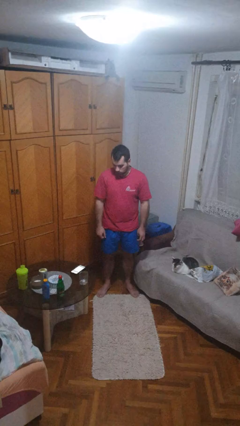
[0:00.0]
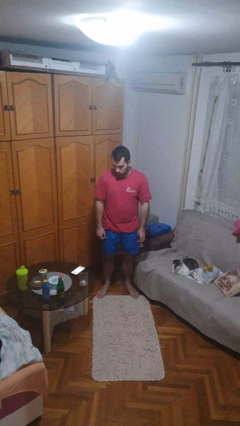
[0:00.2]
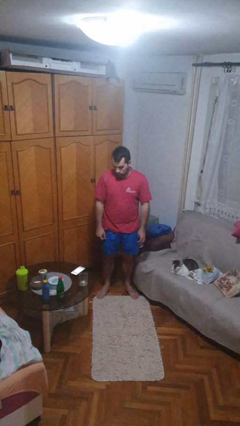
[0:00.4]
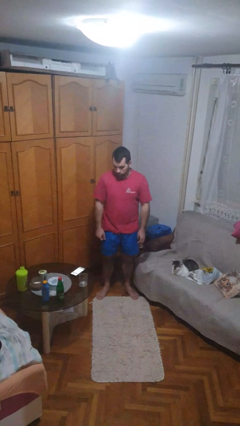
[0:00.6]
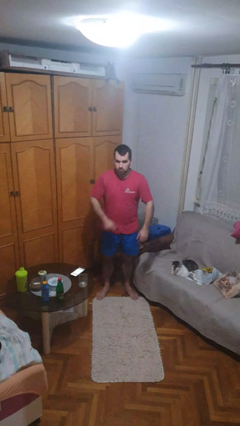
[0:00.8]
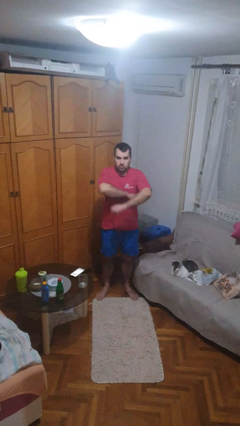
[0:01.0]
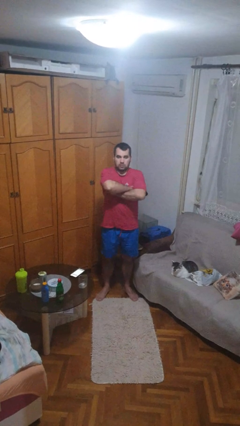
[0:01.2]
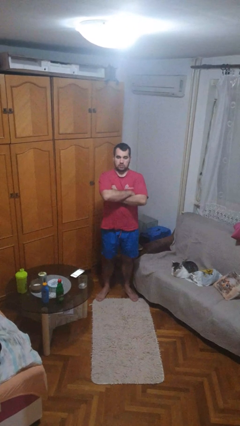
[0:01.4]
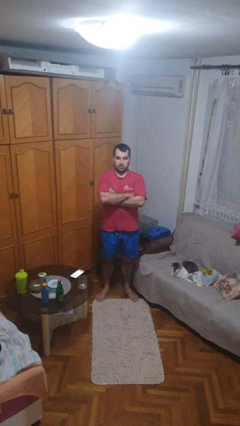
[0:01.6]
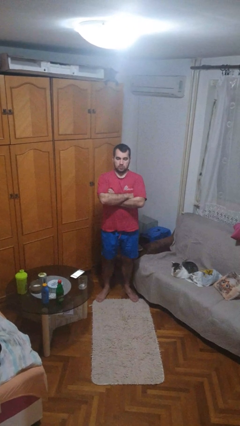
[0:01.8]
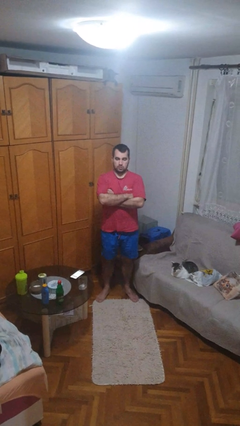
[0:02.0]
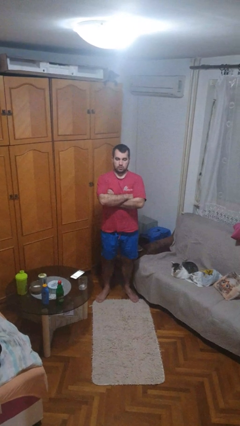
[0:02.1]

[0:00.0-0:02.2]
person crosses arms

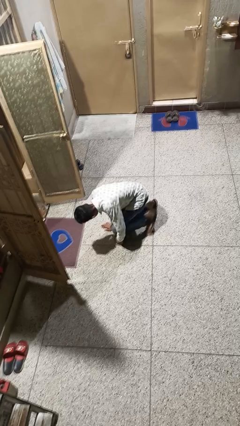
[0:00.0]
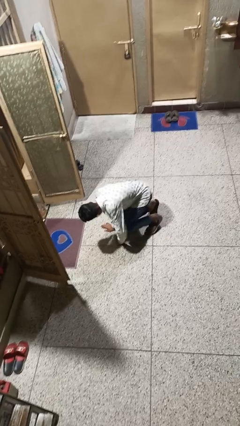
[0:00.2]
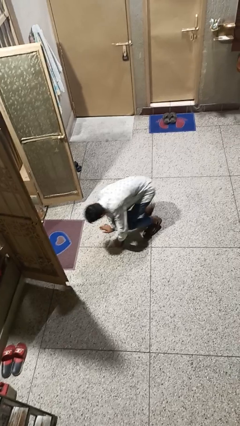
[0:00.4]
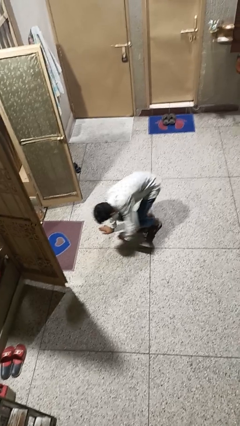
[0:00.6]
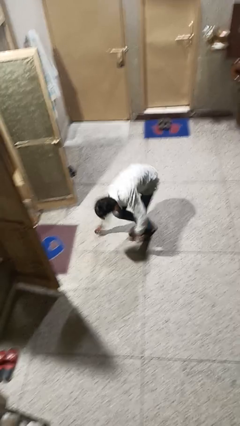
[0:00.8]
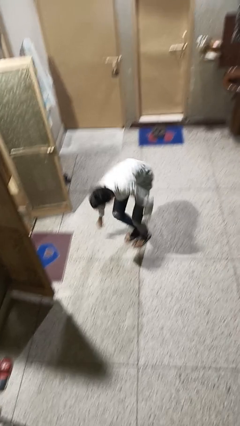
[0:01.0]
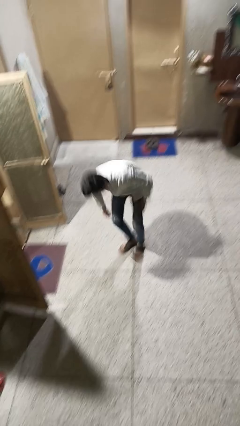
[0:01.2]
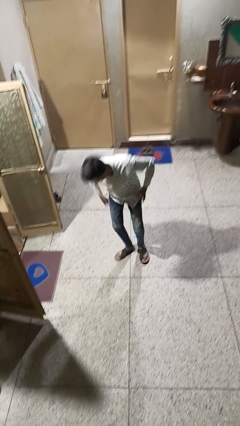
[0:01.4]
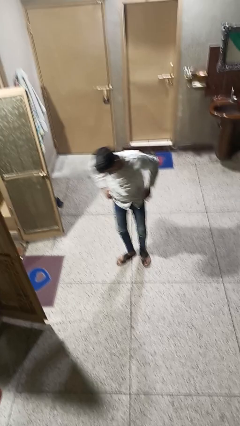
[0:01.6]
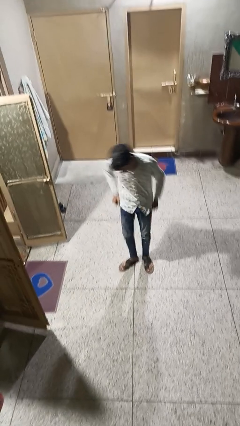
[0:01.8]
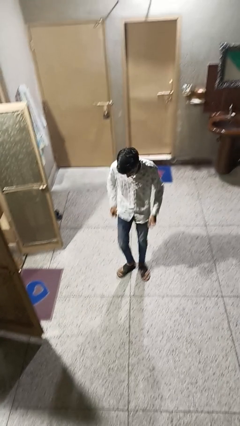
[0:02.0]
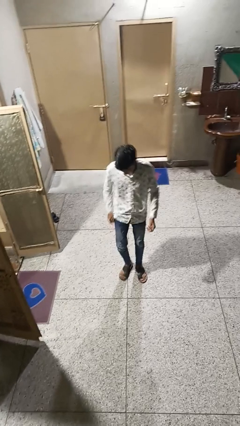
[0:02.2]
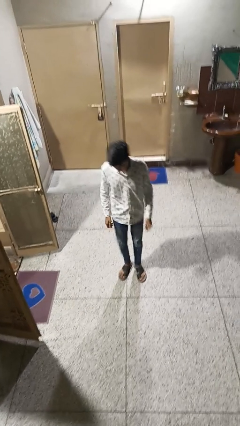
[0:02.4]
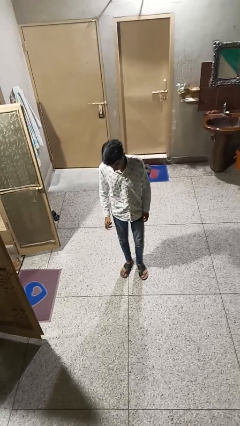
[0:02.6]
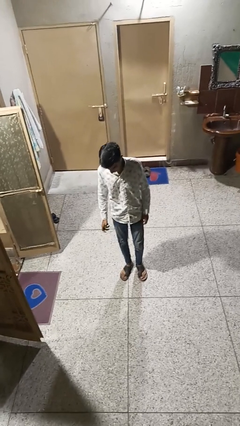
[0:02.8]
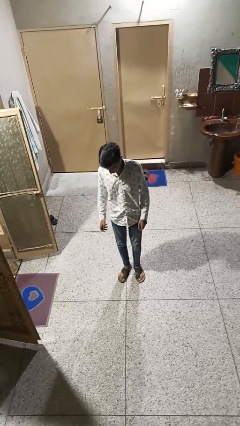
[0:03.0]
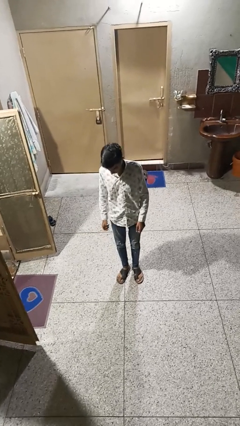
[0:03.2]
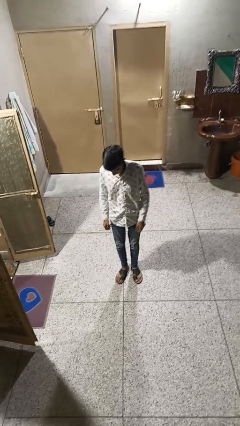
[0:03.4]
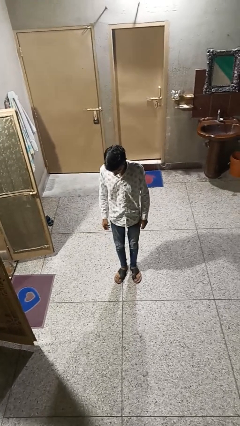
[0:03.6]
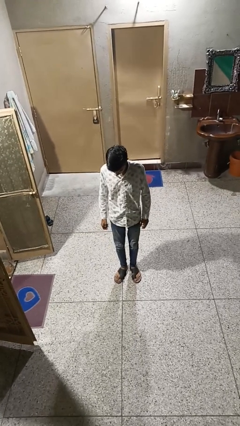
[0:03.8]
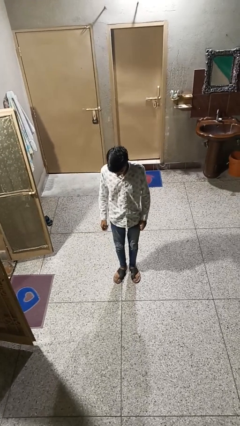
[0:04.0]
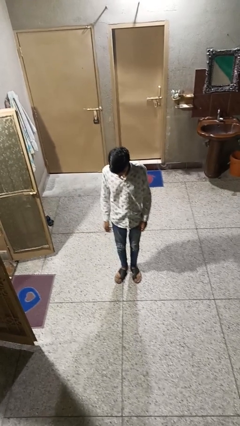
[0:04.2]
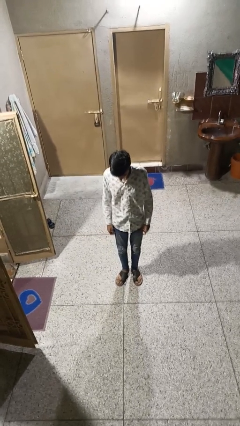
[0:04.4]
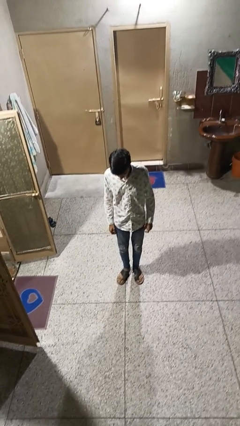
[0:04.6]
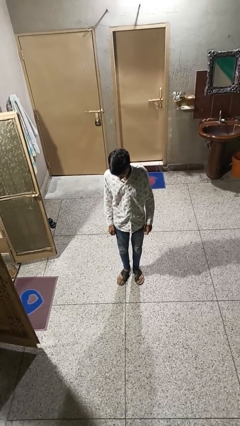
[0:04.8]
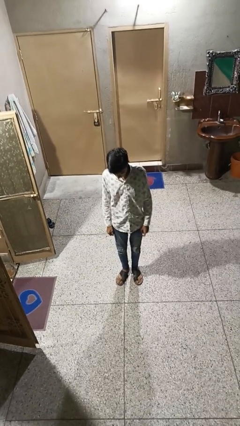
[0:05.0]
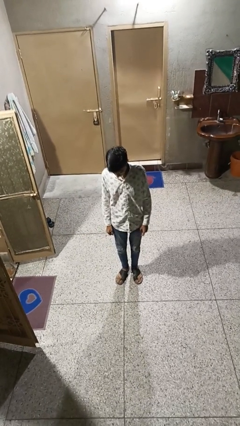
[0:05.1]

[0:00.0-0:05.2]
person stands up from floor

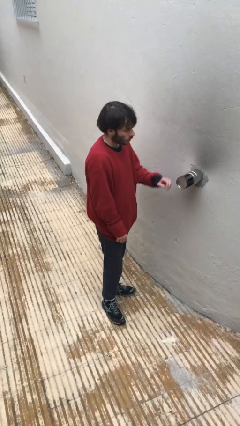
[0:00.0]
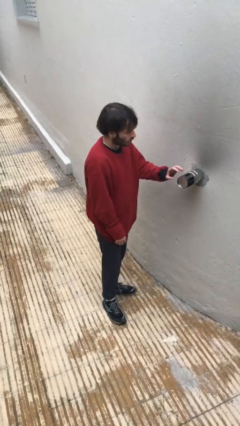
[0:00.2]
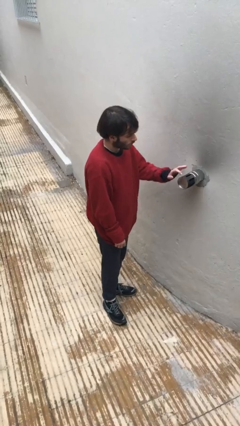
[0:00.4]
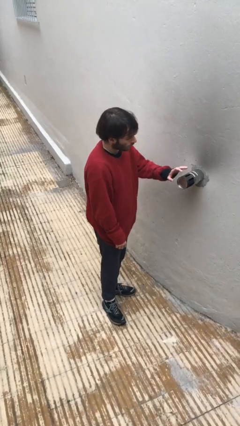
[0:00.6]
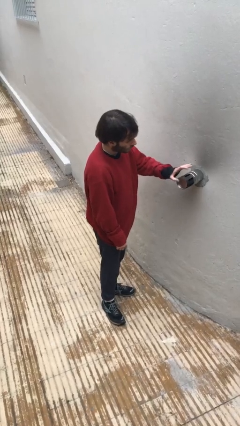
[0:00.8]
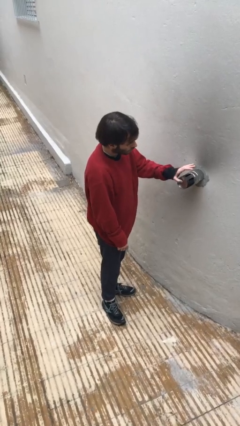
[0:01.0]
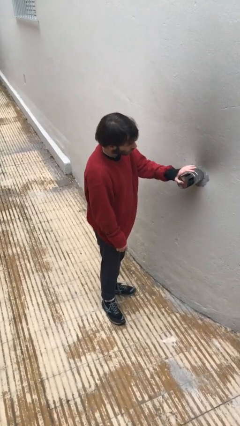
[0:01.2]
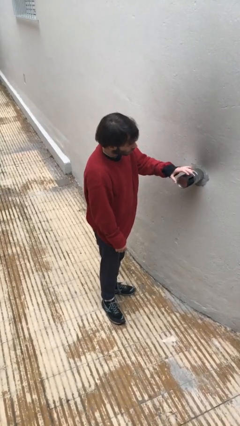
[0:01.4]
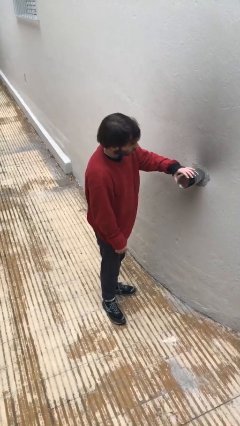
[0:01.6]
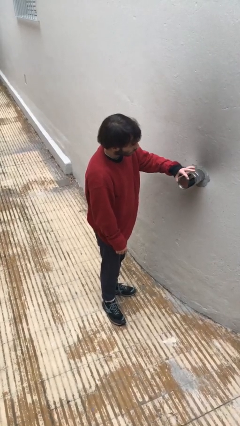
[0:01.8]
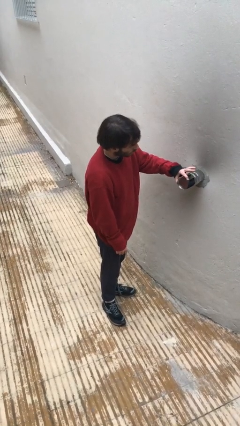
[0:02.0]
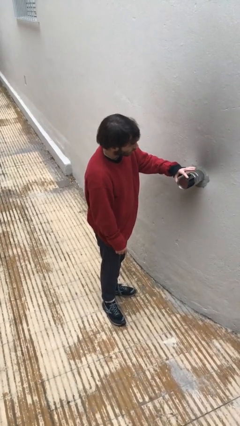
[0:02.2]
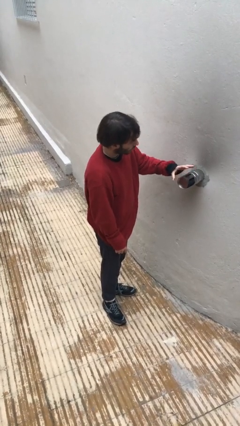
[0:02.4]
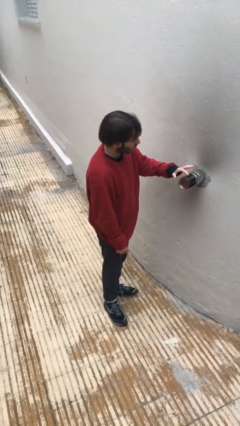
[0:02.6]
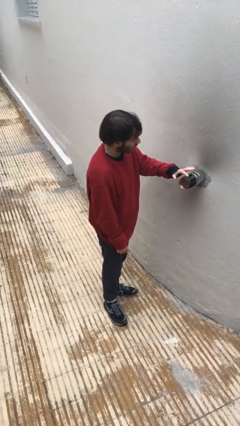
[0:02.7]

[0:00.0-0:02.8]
person taps object with finger

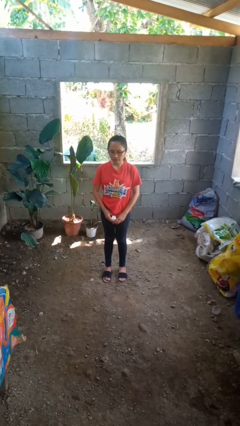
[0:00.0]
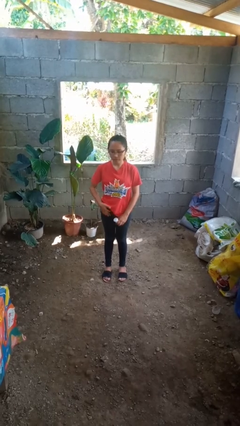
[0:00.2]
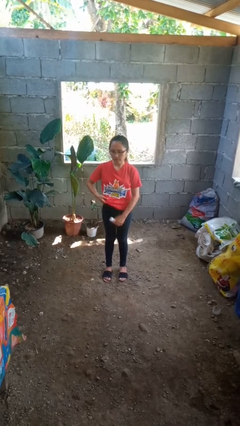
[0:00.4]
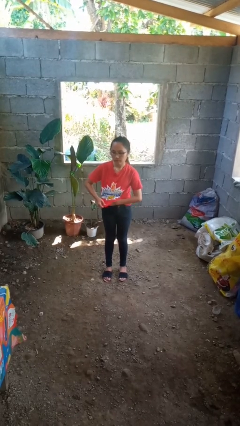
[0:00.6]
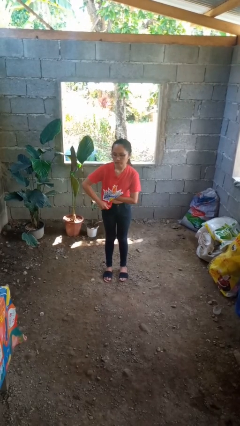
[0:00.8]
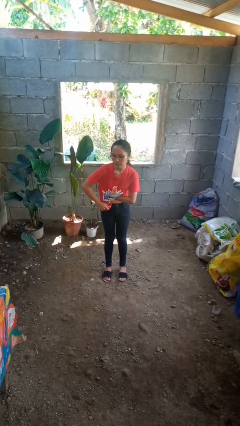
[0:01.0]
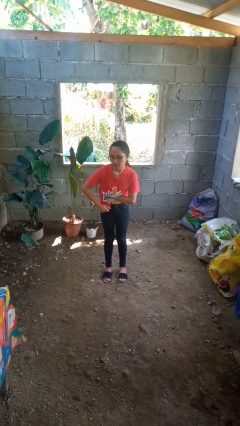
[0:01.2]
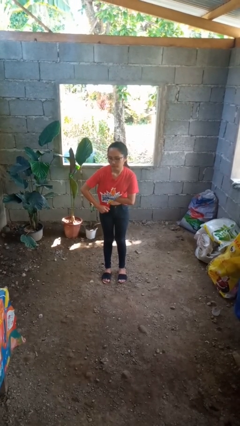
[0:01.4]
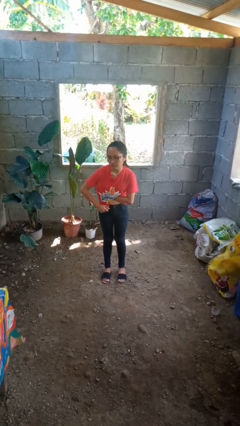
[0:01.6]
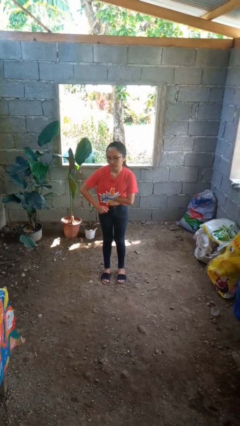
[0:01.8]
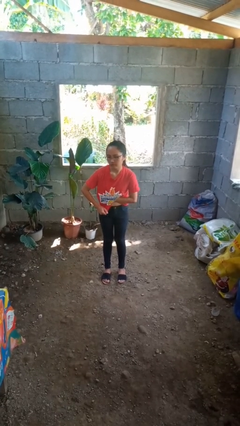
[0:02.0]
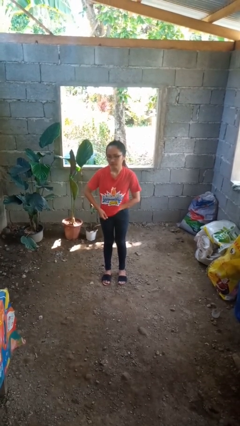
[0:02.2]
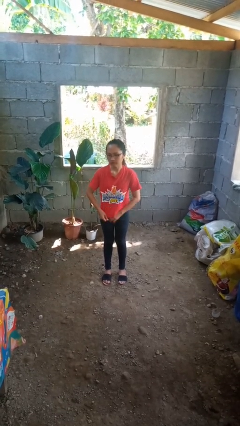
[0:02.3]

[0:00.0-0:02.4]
person applies deodorant

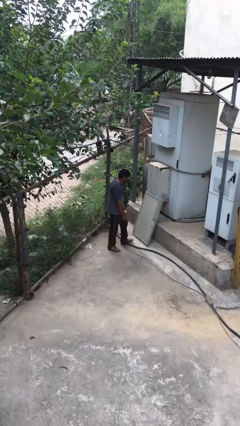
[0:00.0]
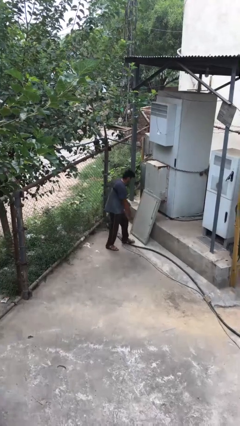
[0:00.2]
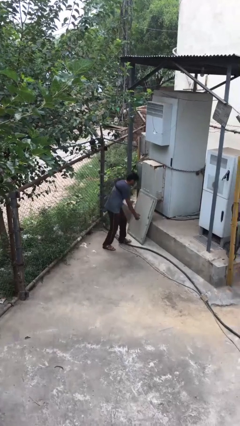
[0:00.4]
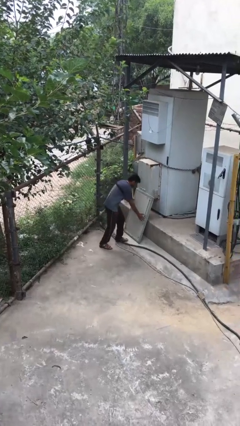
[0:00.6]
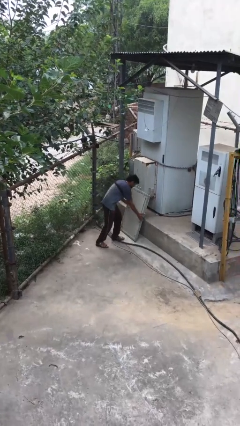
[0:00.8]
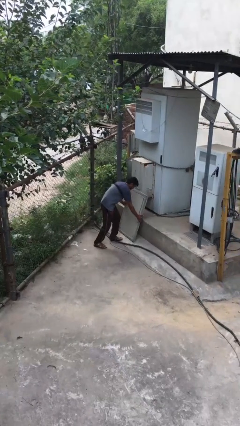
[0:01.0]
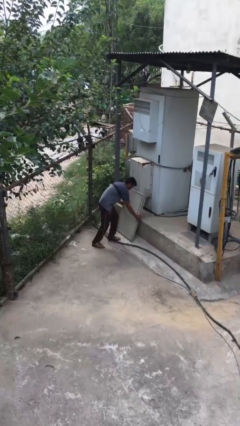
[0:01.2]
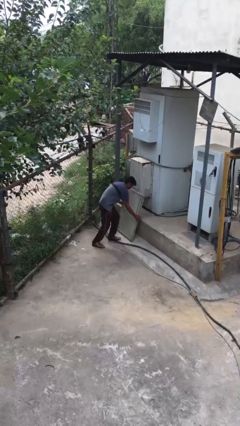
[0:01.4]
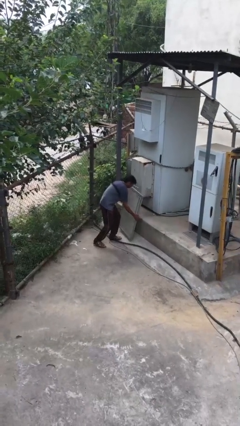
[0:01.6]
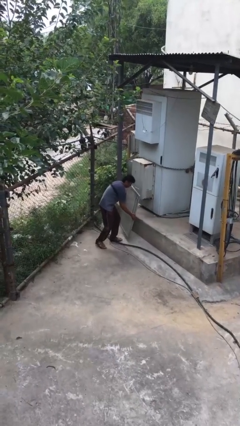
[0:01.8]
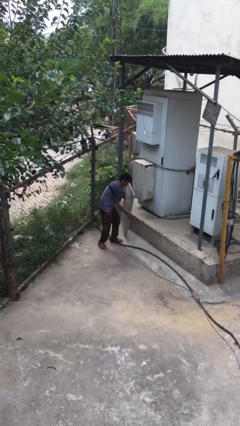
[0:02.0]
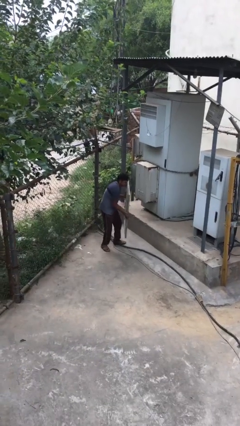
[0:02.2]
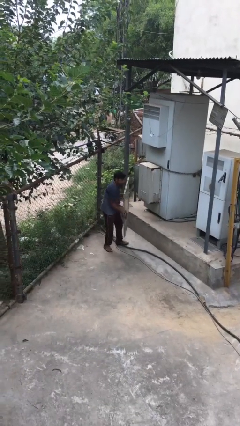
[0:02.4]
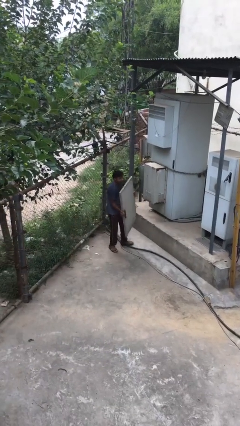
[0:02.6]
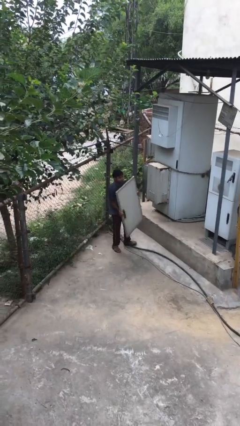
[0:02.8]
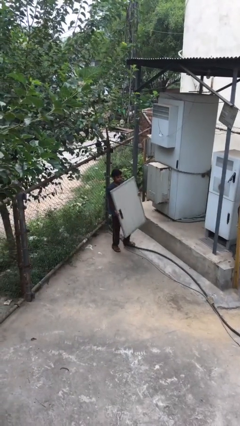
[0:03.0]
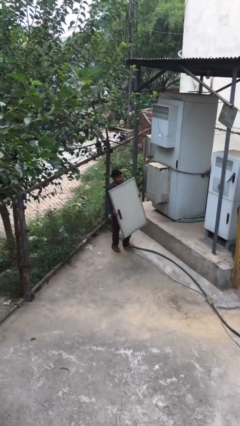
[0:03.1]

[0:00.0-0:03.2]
person picks up object from floor

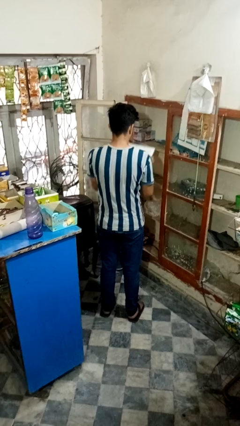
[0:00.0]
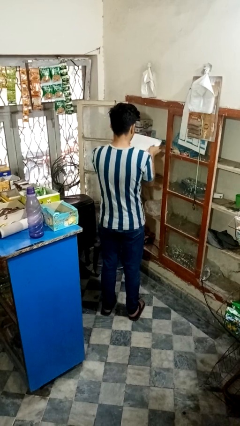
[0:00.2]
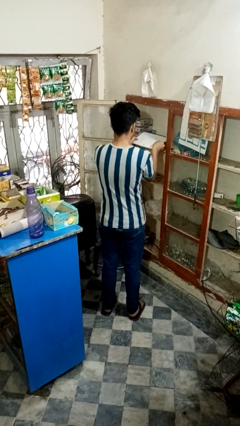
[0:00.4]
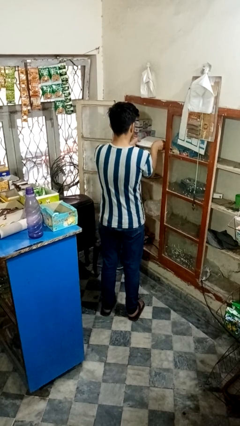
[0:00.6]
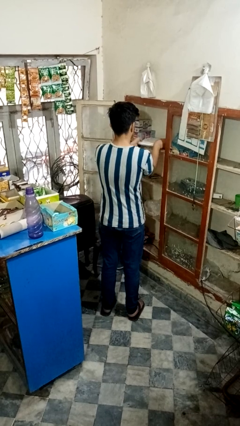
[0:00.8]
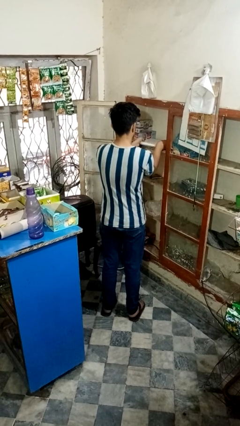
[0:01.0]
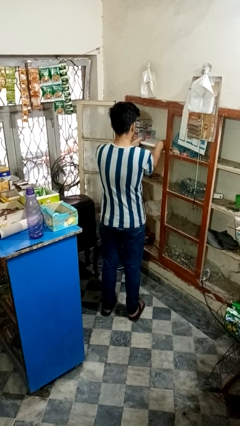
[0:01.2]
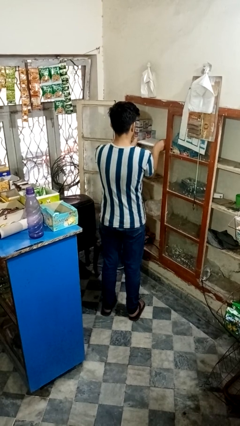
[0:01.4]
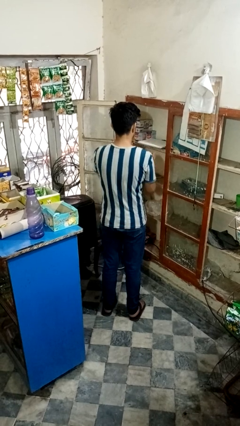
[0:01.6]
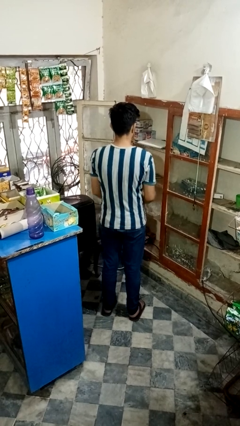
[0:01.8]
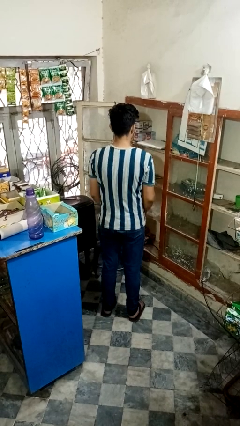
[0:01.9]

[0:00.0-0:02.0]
person puts down object into cabinet
